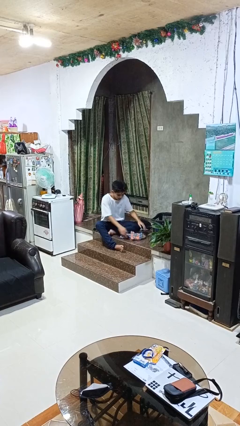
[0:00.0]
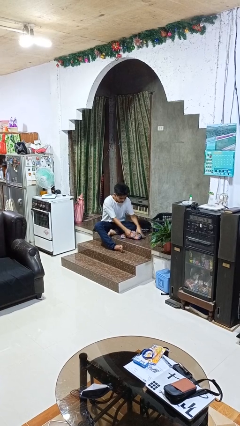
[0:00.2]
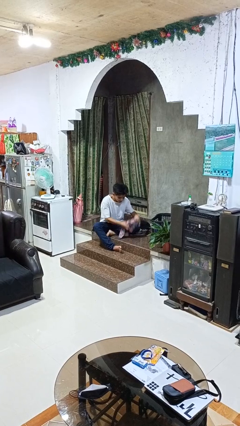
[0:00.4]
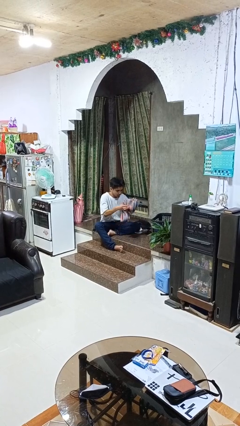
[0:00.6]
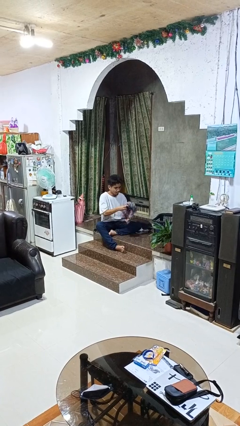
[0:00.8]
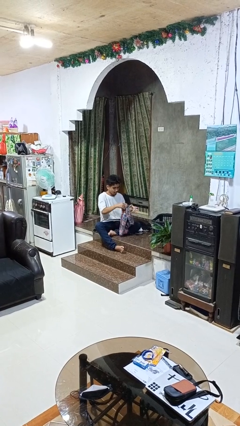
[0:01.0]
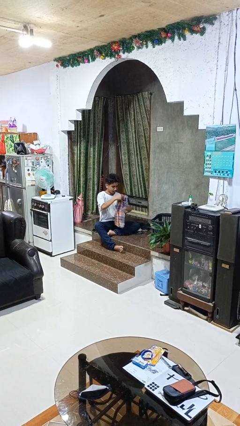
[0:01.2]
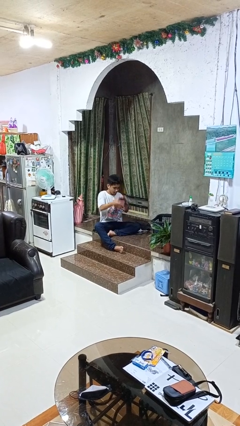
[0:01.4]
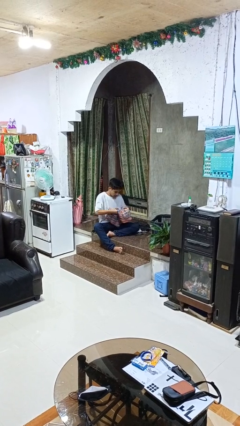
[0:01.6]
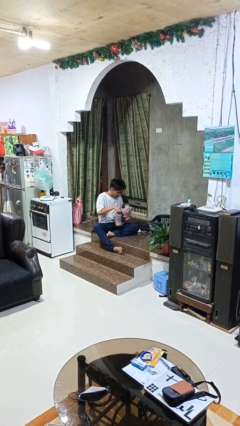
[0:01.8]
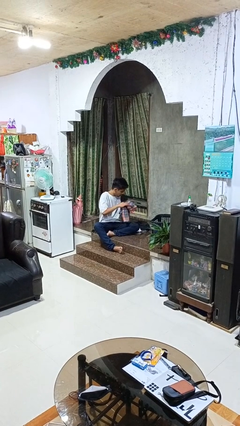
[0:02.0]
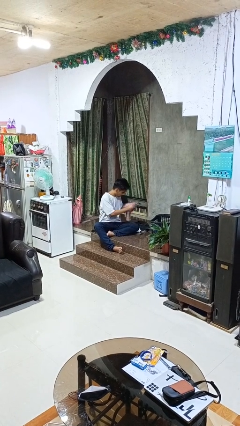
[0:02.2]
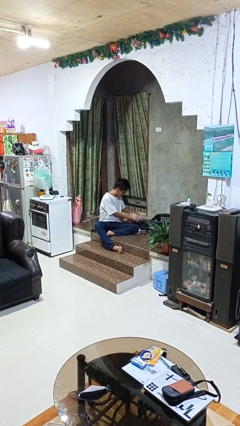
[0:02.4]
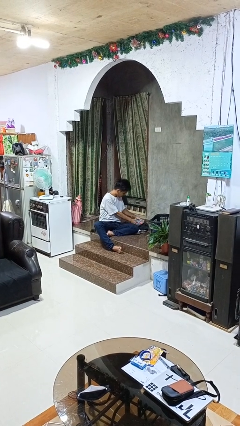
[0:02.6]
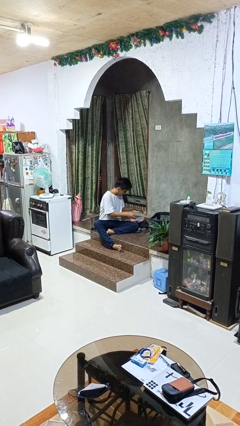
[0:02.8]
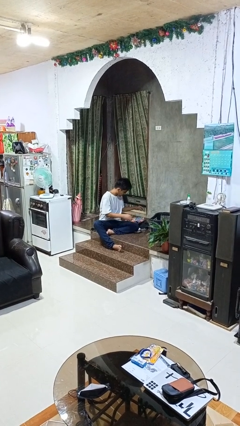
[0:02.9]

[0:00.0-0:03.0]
person folds pants

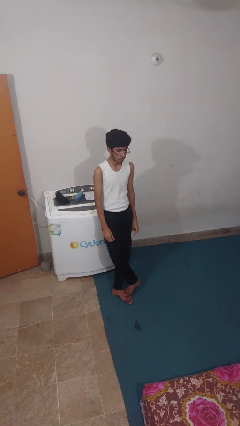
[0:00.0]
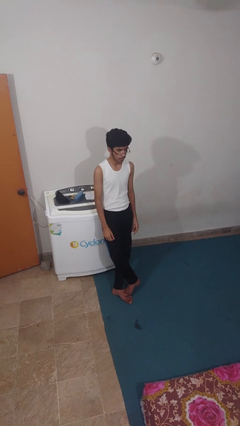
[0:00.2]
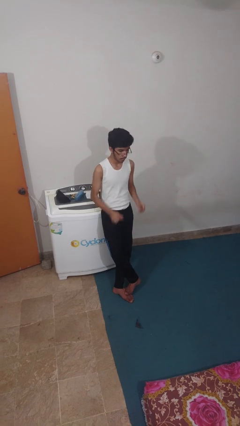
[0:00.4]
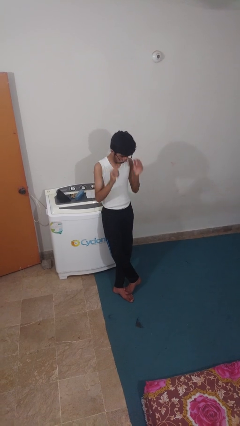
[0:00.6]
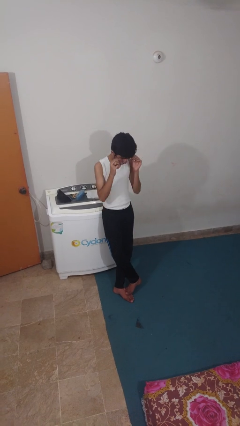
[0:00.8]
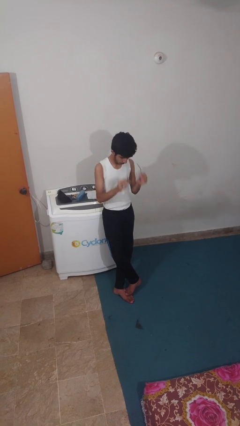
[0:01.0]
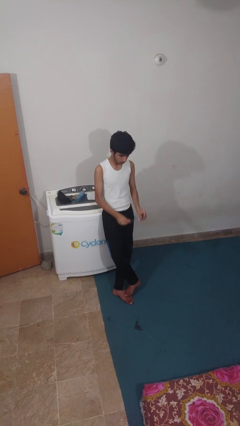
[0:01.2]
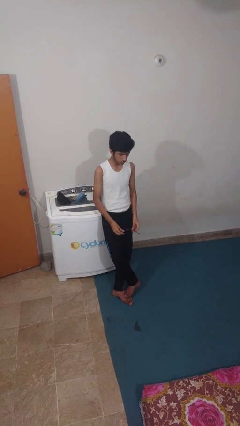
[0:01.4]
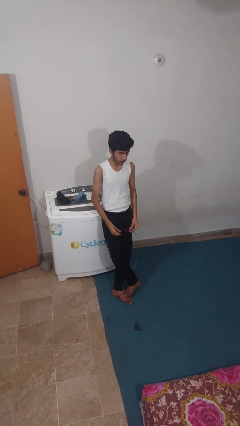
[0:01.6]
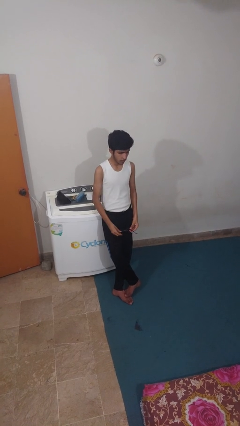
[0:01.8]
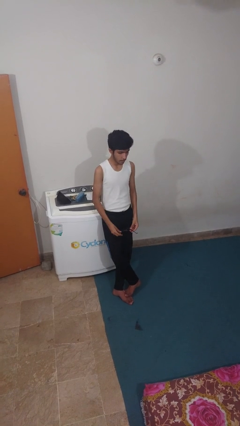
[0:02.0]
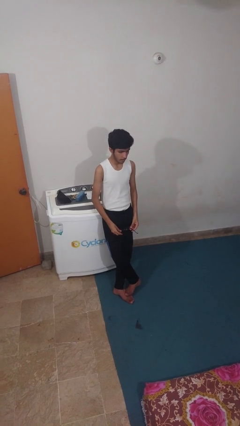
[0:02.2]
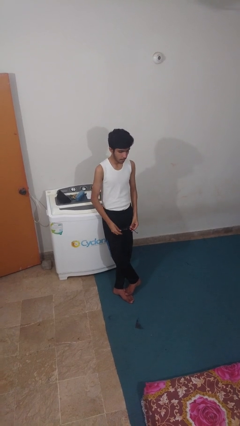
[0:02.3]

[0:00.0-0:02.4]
person takes off glasses

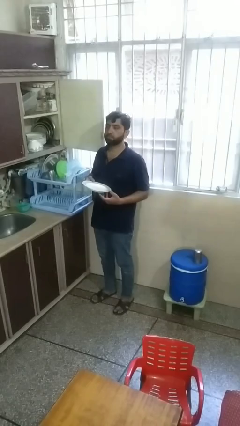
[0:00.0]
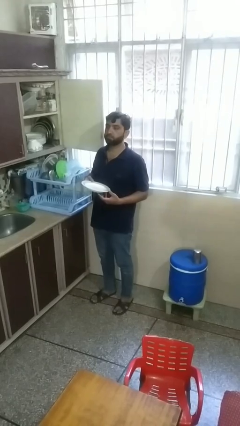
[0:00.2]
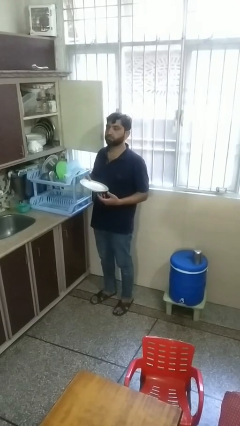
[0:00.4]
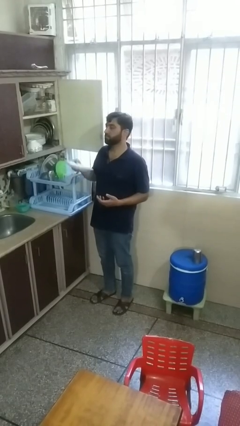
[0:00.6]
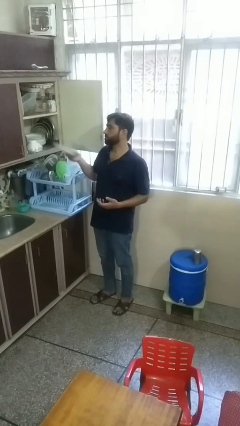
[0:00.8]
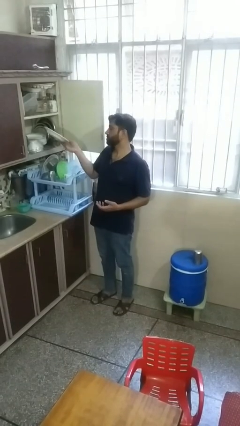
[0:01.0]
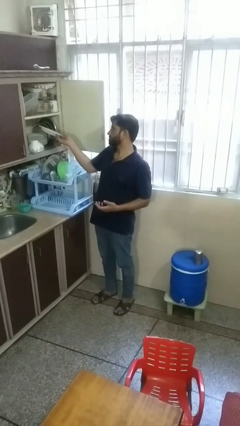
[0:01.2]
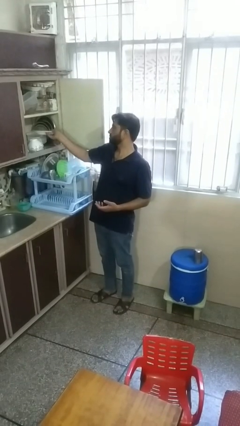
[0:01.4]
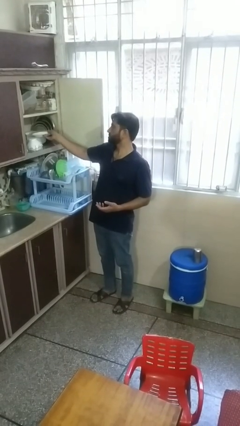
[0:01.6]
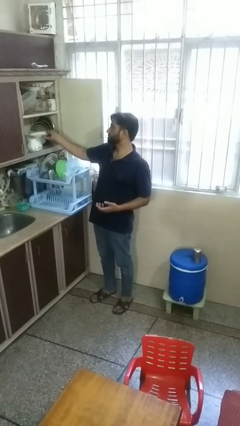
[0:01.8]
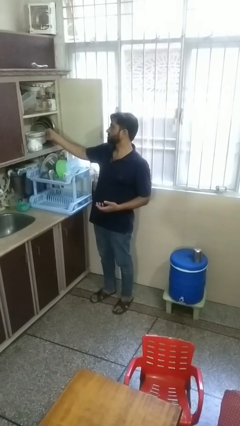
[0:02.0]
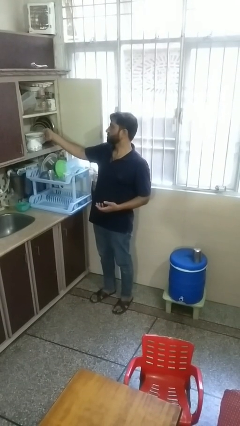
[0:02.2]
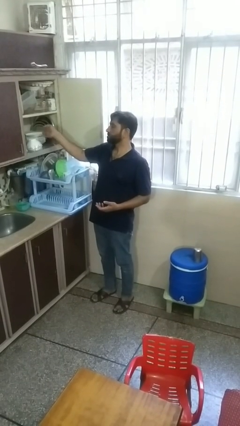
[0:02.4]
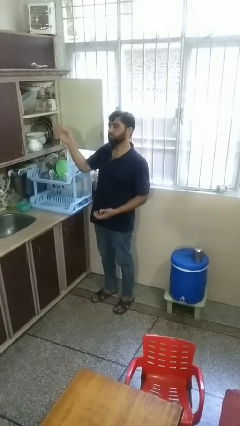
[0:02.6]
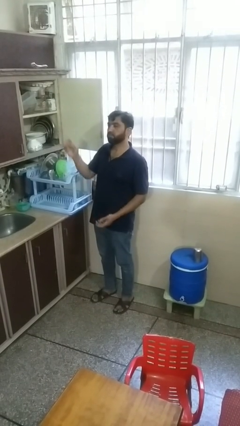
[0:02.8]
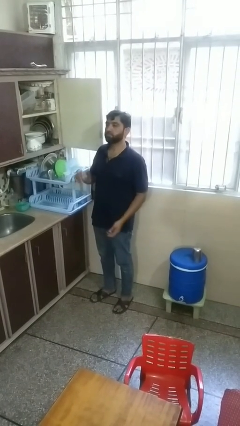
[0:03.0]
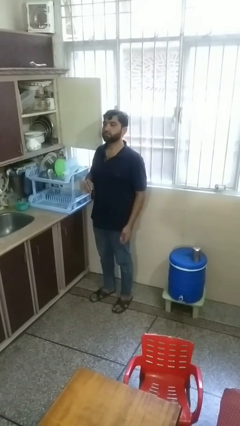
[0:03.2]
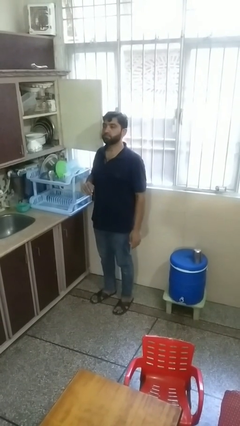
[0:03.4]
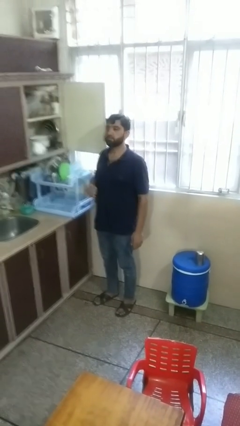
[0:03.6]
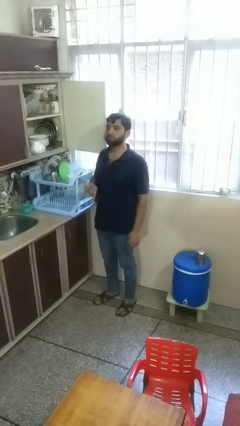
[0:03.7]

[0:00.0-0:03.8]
person puts object in cabinet

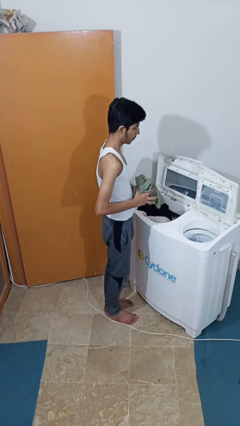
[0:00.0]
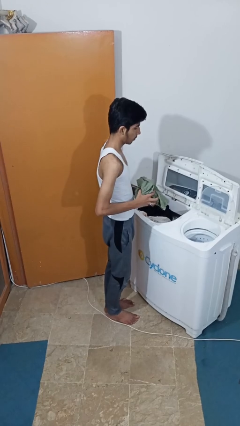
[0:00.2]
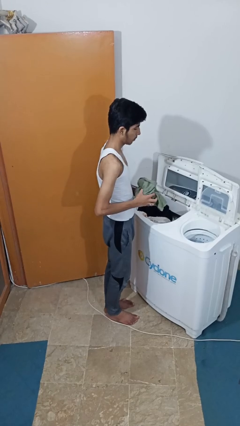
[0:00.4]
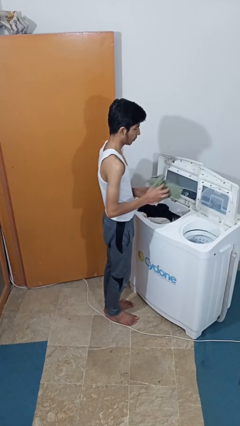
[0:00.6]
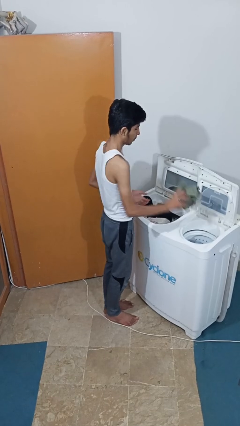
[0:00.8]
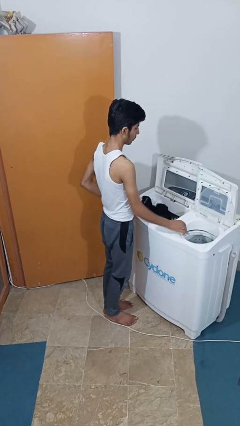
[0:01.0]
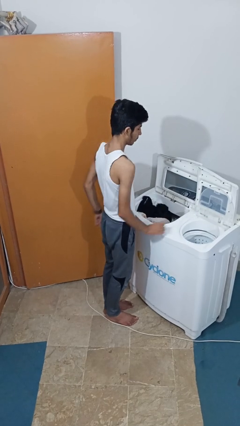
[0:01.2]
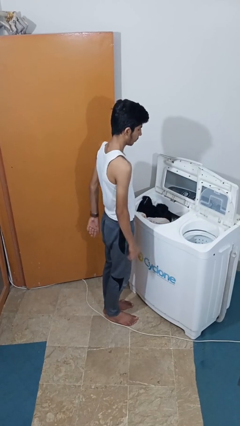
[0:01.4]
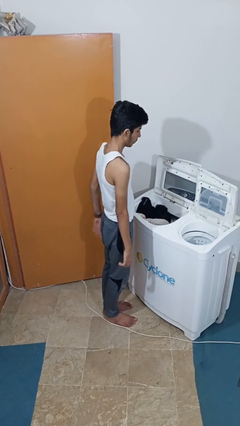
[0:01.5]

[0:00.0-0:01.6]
person loads dryer

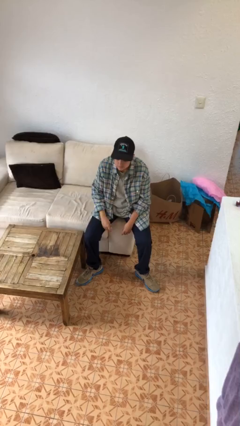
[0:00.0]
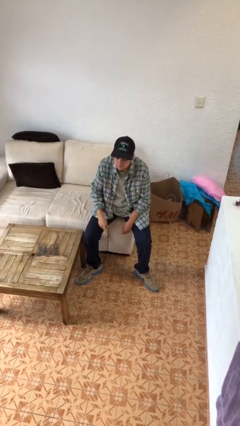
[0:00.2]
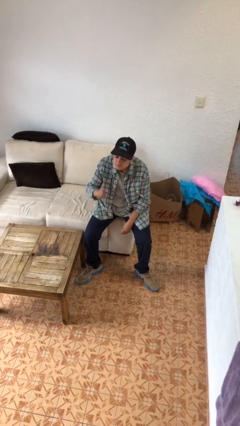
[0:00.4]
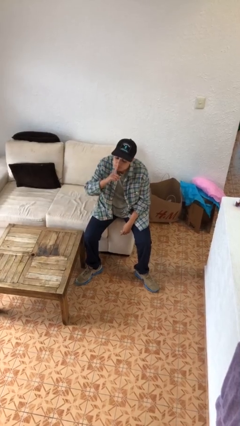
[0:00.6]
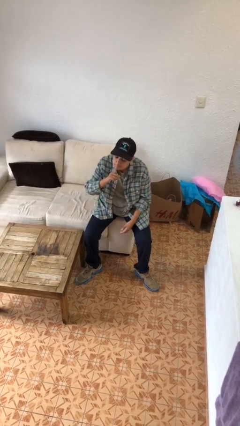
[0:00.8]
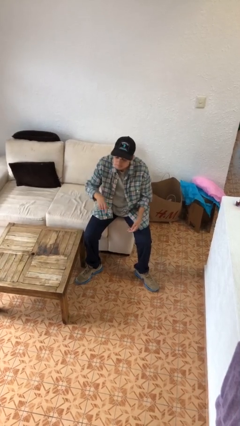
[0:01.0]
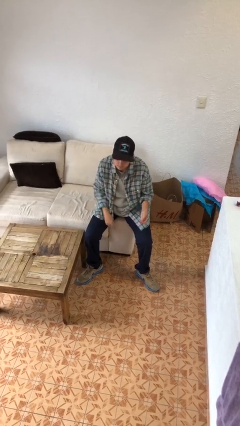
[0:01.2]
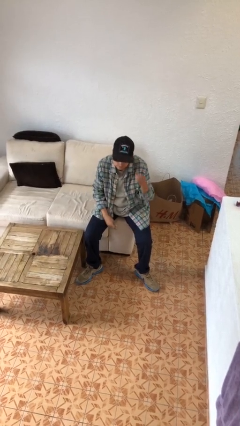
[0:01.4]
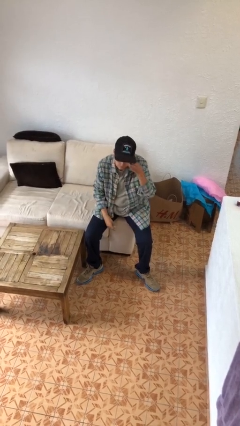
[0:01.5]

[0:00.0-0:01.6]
person gestures be quiet

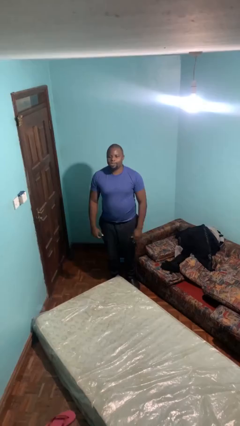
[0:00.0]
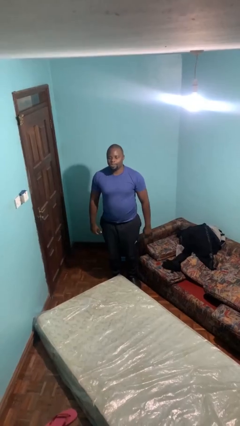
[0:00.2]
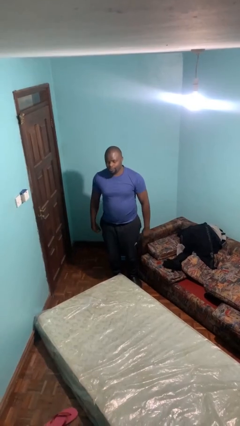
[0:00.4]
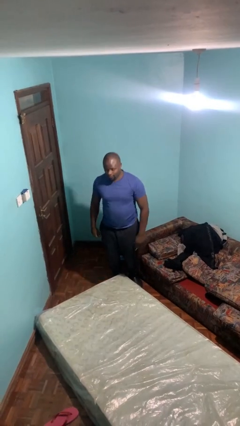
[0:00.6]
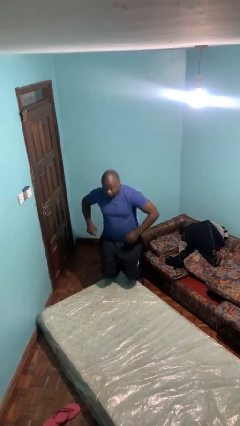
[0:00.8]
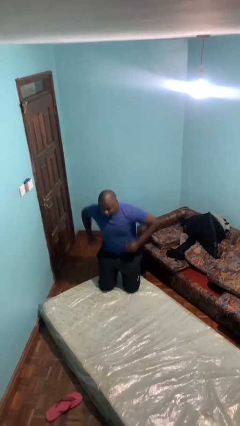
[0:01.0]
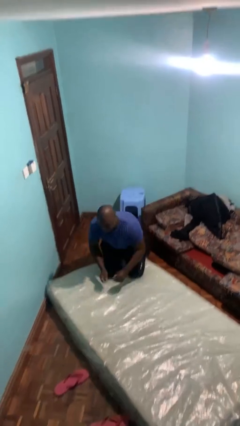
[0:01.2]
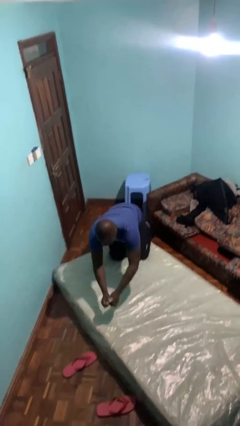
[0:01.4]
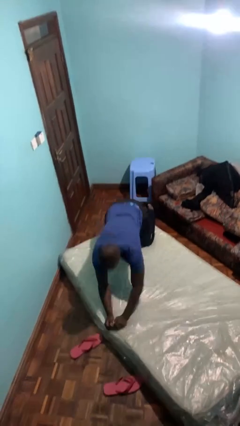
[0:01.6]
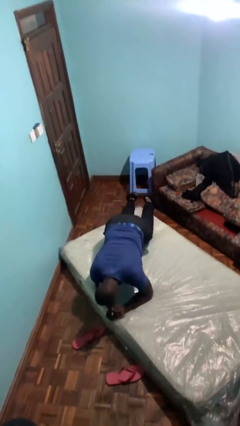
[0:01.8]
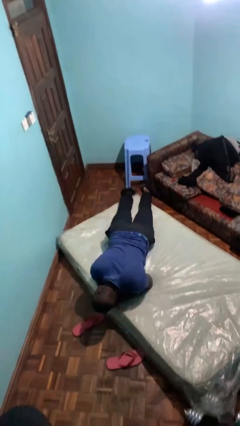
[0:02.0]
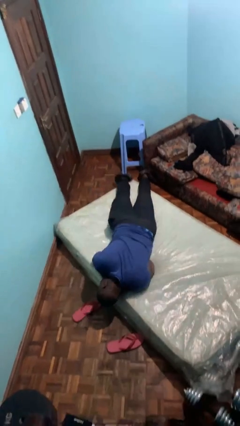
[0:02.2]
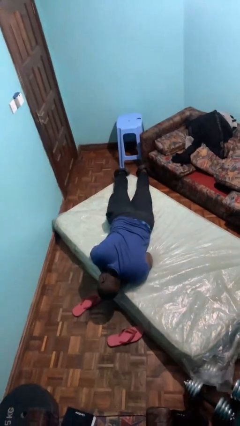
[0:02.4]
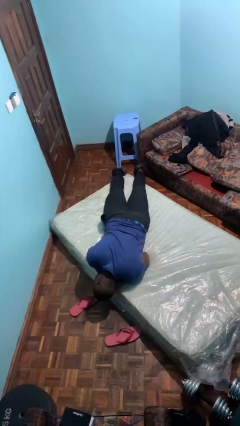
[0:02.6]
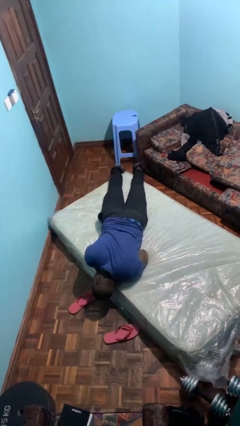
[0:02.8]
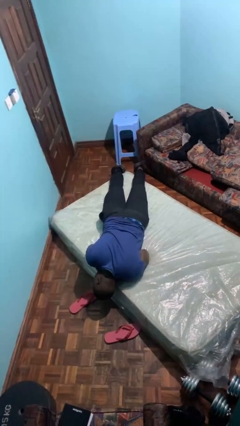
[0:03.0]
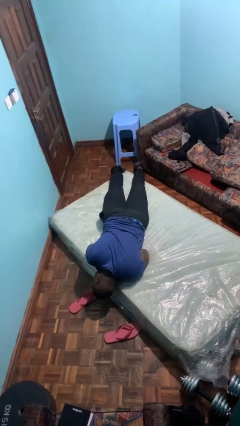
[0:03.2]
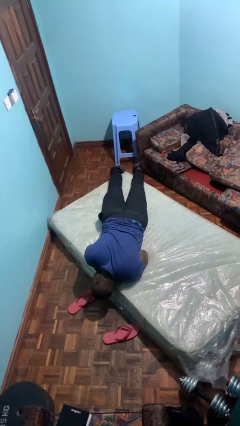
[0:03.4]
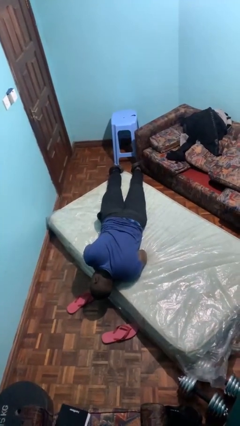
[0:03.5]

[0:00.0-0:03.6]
person lies down on bed

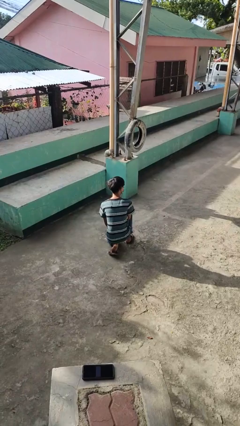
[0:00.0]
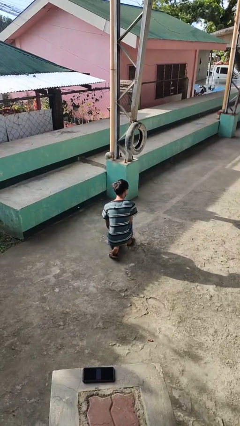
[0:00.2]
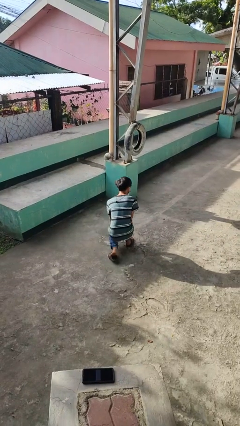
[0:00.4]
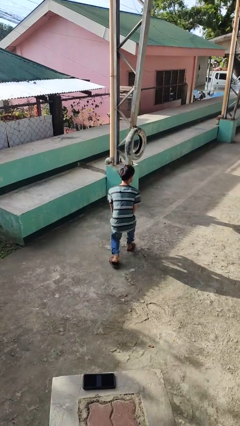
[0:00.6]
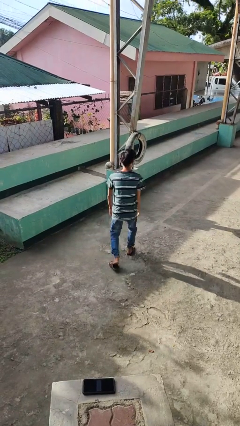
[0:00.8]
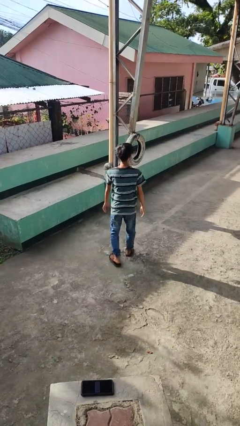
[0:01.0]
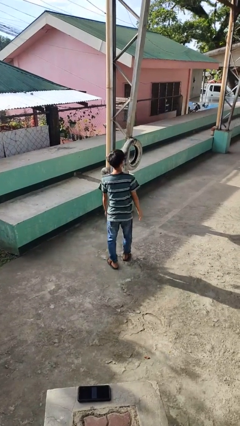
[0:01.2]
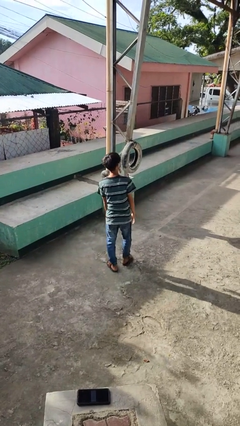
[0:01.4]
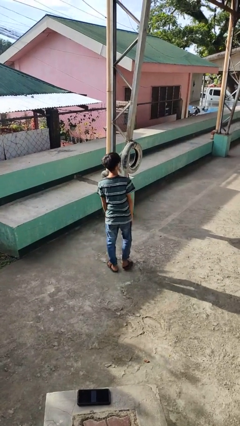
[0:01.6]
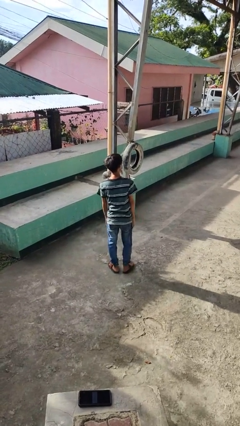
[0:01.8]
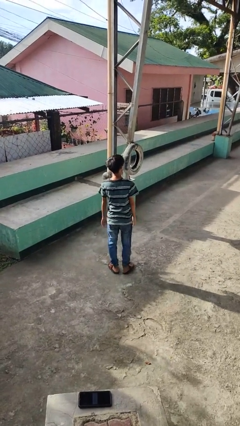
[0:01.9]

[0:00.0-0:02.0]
person stands up from floor
